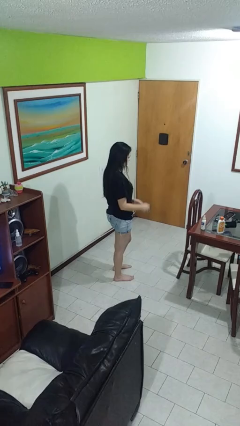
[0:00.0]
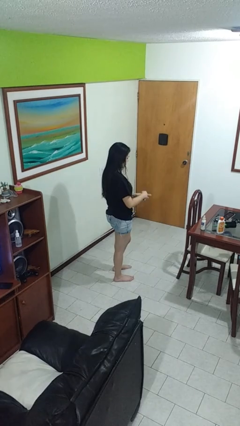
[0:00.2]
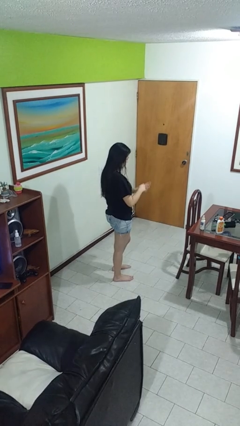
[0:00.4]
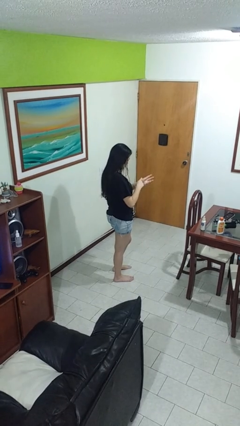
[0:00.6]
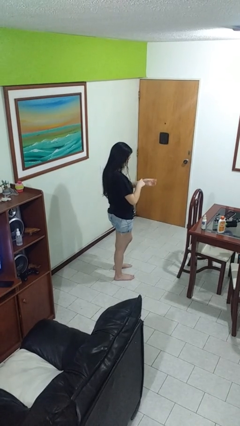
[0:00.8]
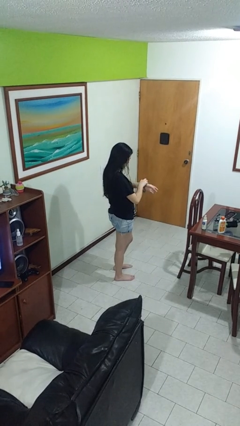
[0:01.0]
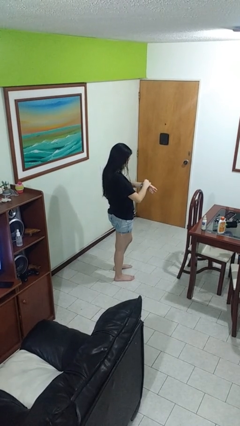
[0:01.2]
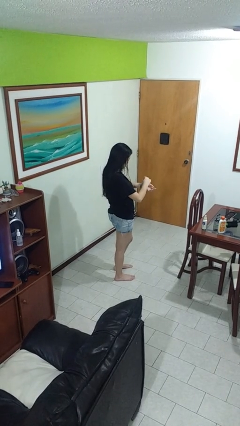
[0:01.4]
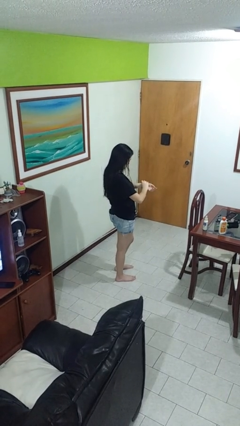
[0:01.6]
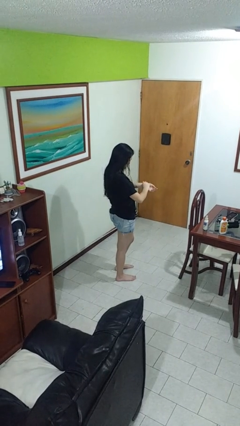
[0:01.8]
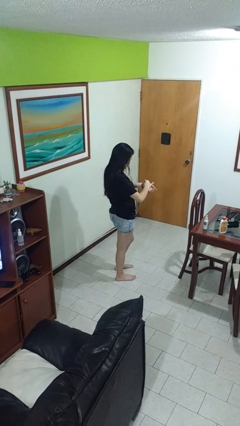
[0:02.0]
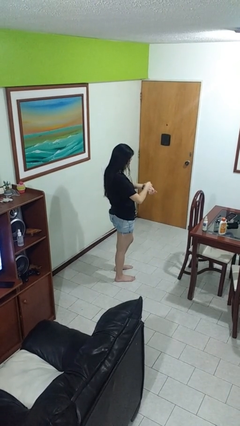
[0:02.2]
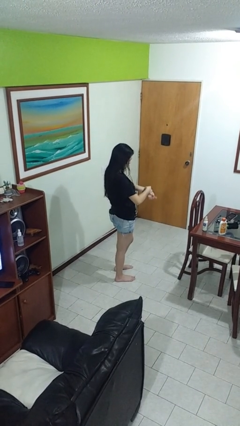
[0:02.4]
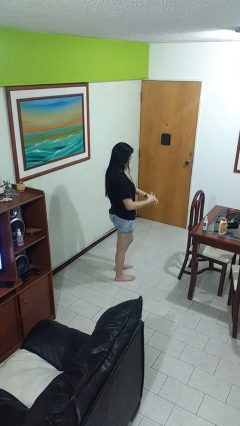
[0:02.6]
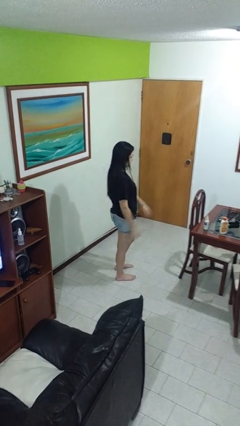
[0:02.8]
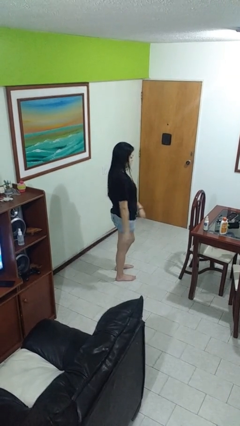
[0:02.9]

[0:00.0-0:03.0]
person puts on wristwatch

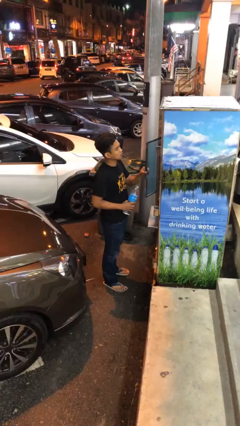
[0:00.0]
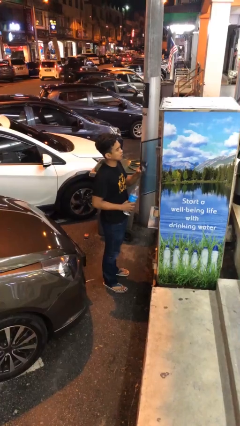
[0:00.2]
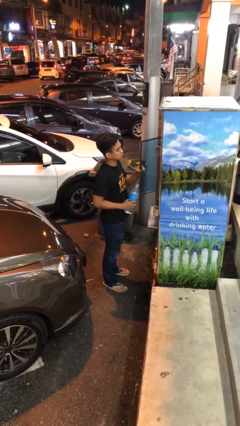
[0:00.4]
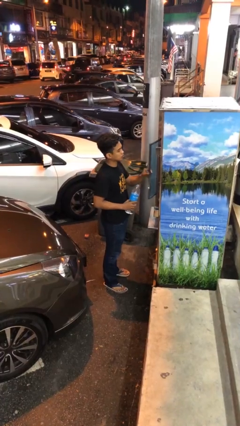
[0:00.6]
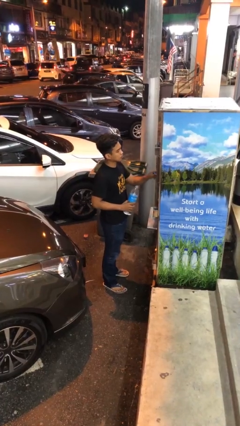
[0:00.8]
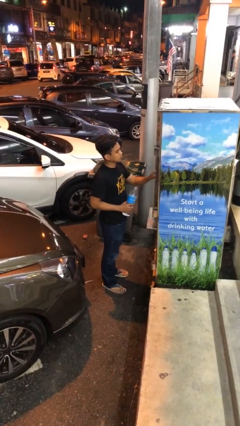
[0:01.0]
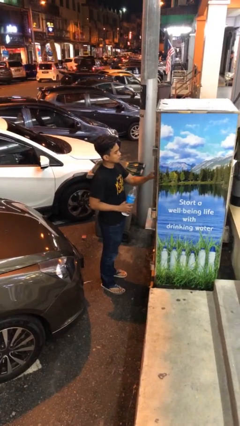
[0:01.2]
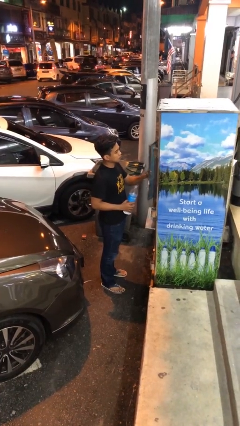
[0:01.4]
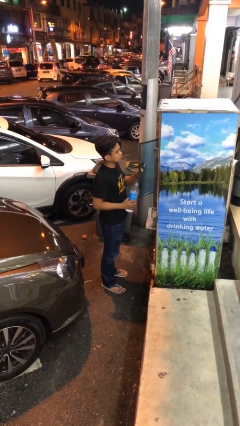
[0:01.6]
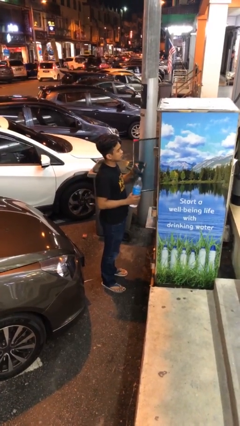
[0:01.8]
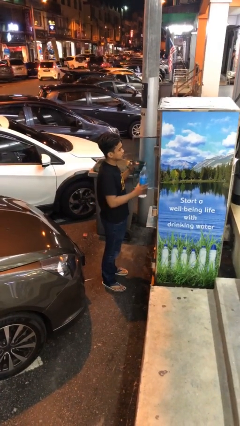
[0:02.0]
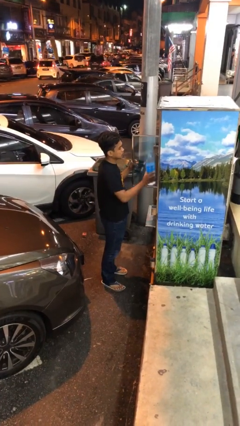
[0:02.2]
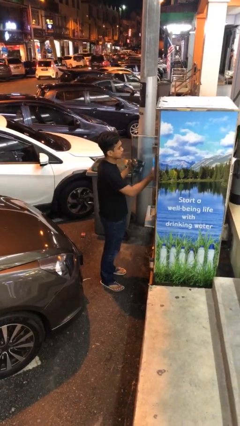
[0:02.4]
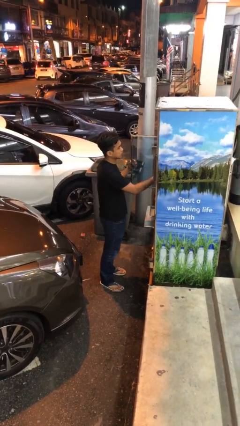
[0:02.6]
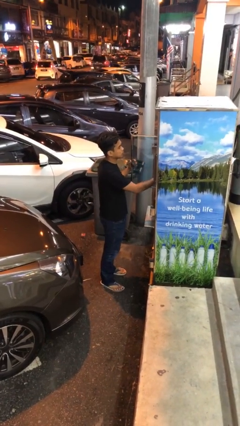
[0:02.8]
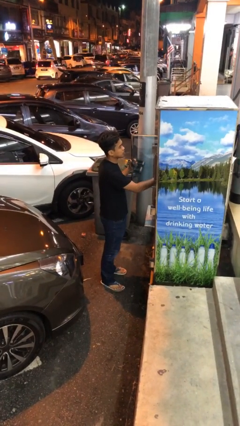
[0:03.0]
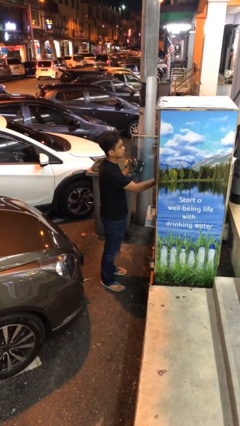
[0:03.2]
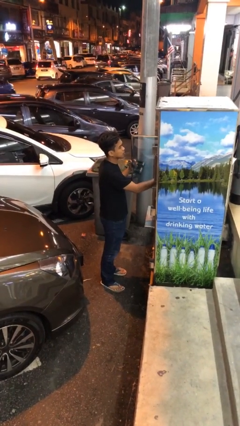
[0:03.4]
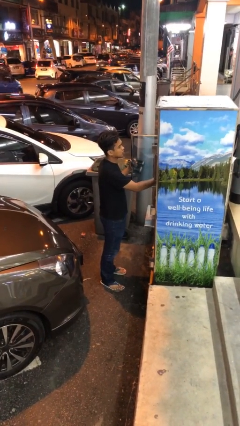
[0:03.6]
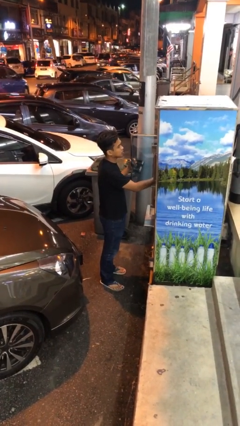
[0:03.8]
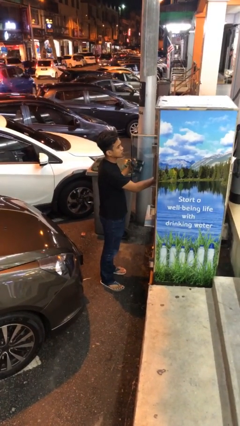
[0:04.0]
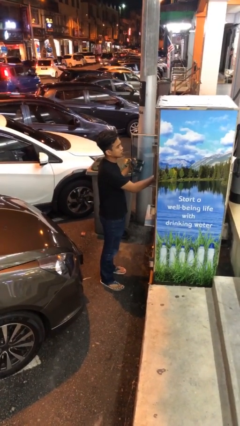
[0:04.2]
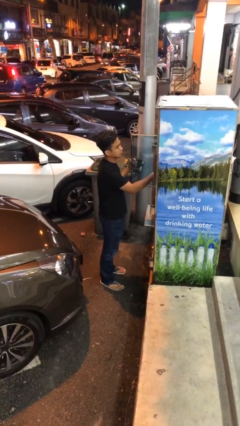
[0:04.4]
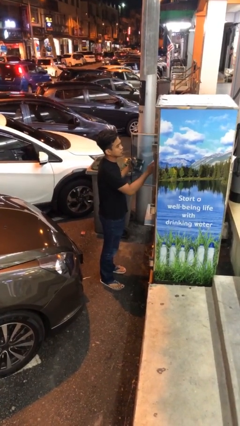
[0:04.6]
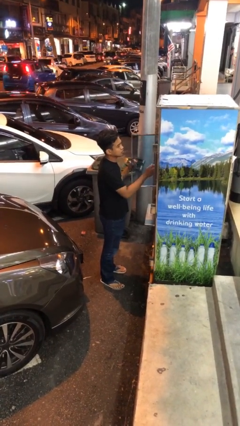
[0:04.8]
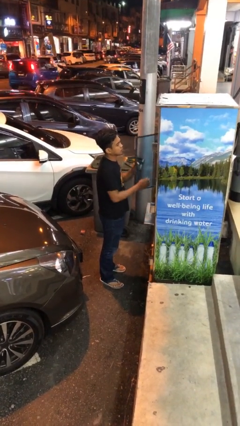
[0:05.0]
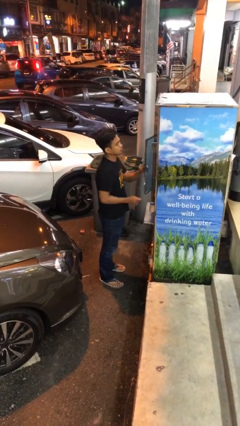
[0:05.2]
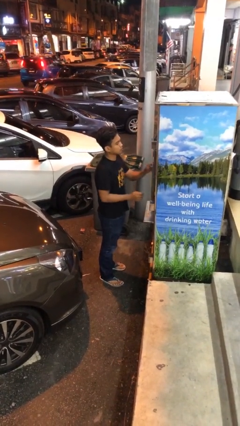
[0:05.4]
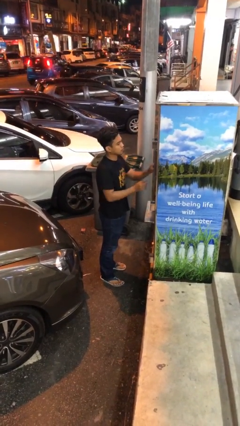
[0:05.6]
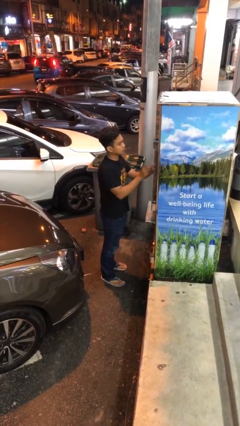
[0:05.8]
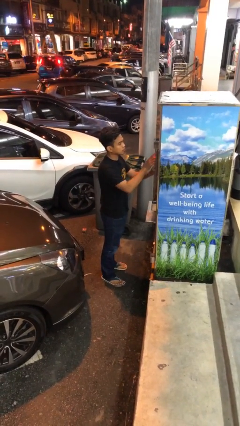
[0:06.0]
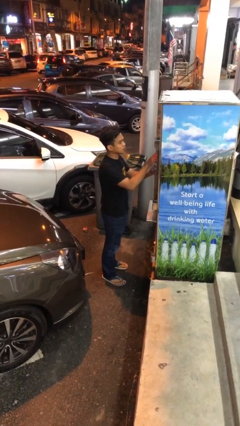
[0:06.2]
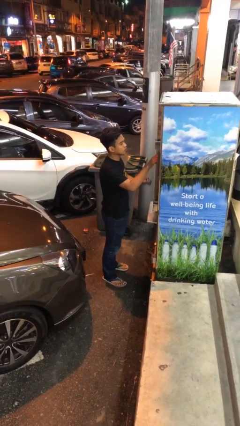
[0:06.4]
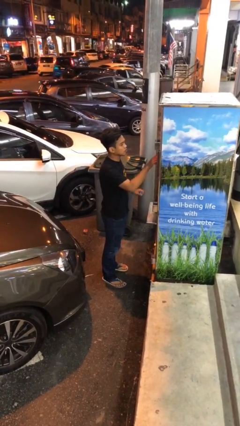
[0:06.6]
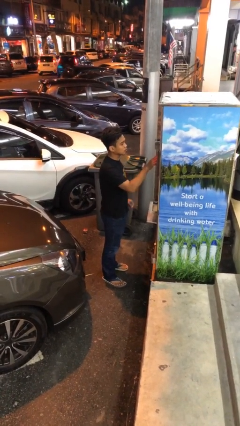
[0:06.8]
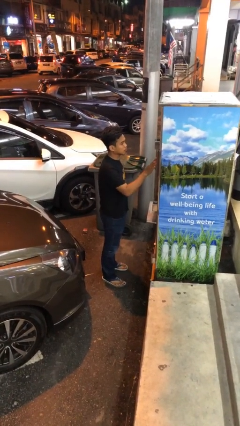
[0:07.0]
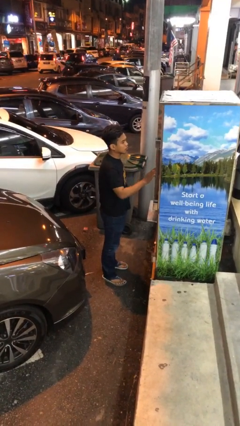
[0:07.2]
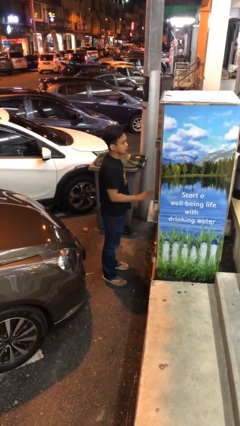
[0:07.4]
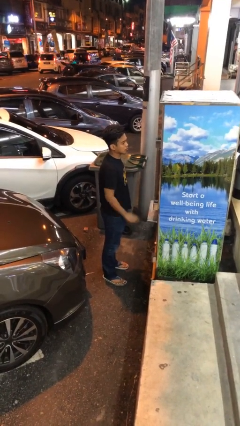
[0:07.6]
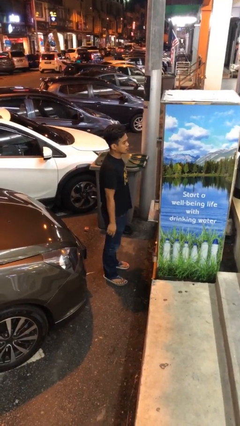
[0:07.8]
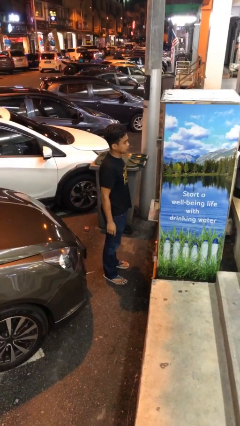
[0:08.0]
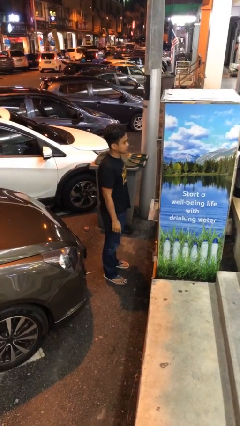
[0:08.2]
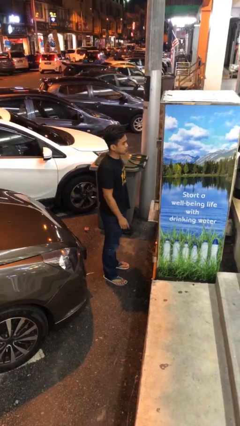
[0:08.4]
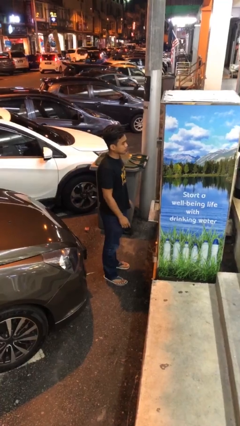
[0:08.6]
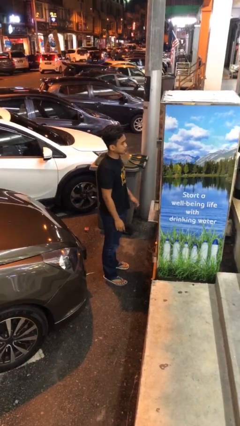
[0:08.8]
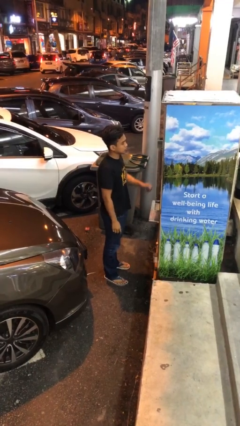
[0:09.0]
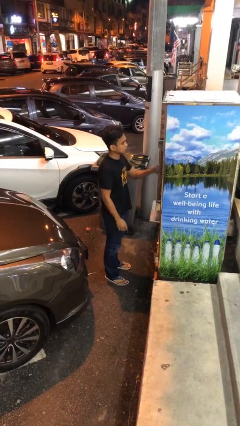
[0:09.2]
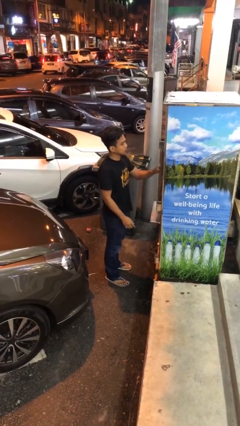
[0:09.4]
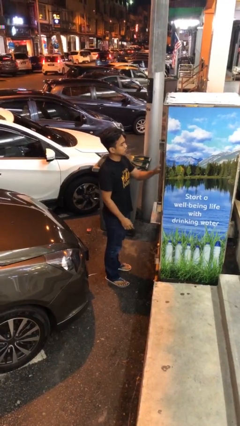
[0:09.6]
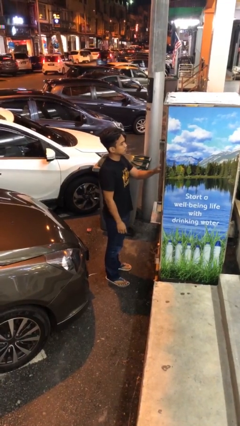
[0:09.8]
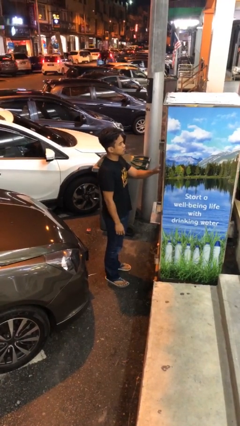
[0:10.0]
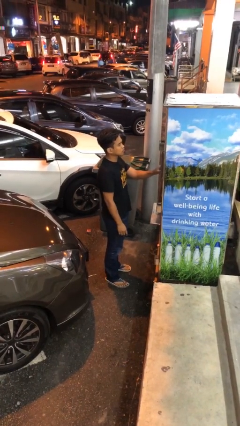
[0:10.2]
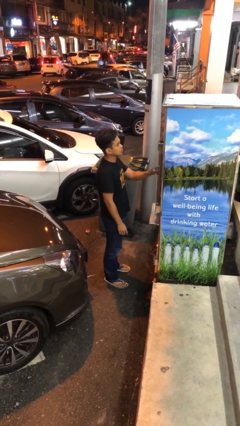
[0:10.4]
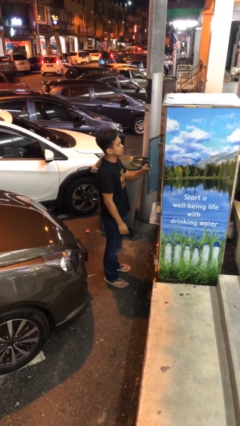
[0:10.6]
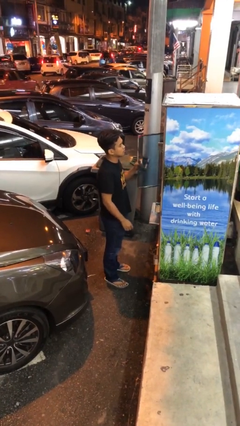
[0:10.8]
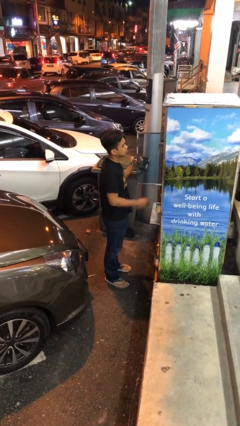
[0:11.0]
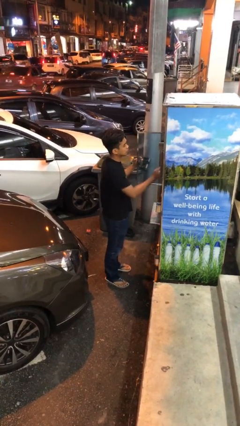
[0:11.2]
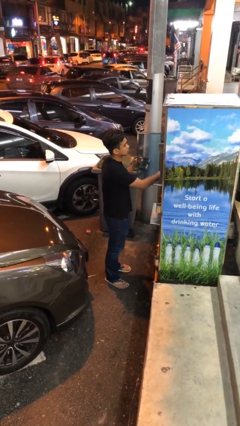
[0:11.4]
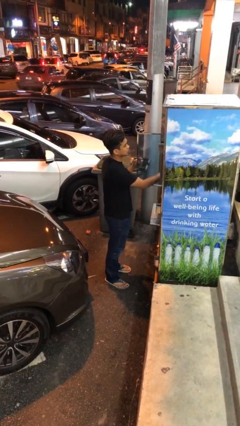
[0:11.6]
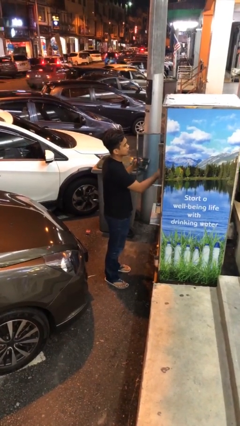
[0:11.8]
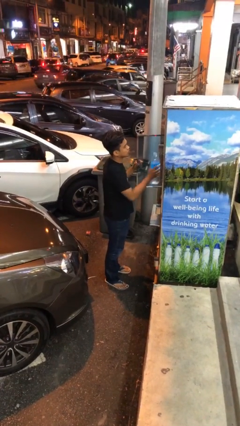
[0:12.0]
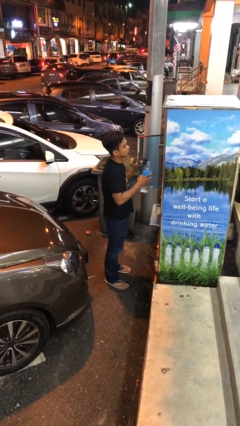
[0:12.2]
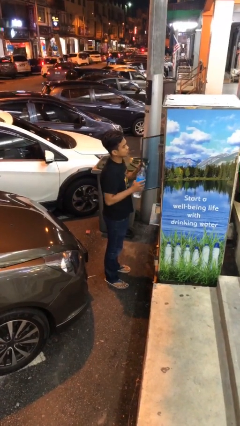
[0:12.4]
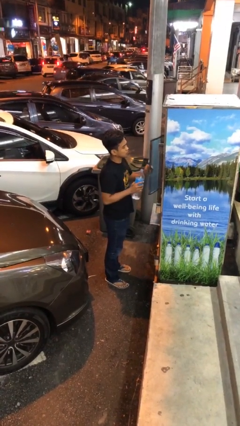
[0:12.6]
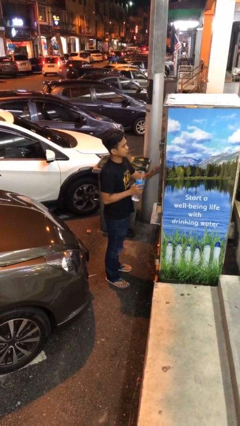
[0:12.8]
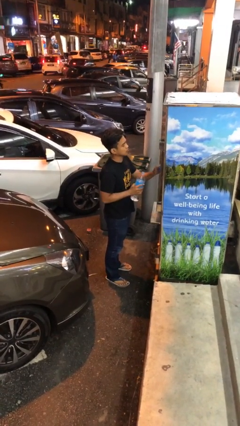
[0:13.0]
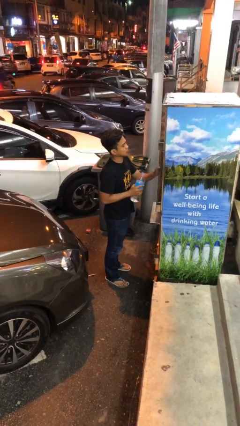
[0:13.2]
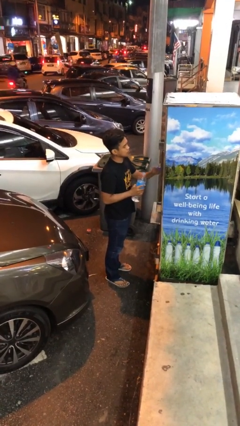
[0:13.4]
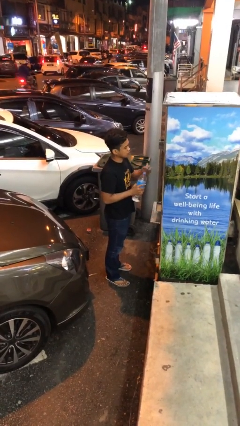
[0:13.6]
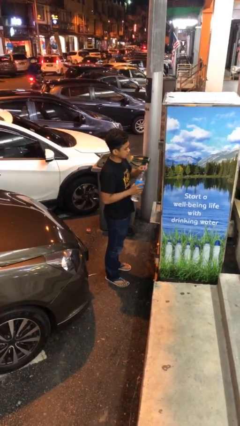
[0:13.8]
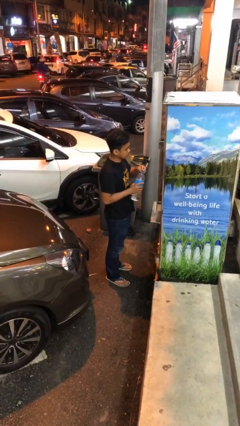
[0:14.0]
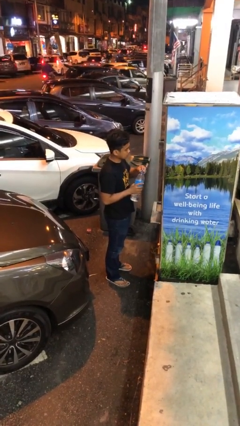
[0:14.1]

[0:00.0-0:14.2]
person purchases from machine

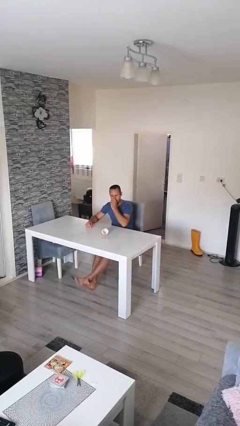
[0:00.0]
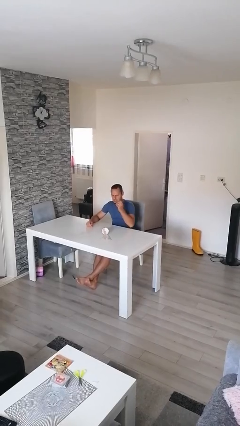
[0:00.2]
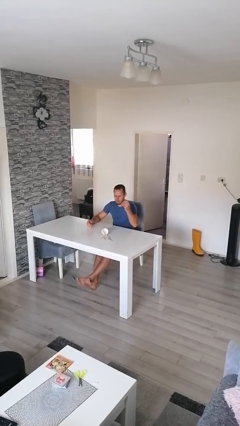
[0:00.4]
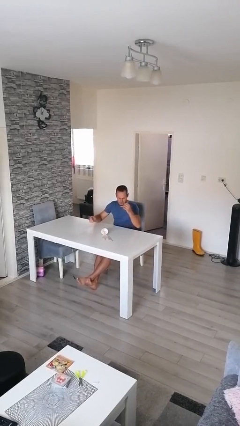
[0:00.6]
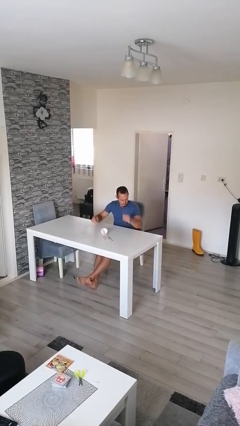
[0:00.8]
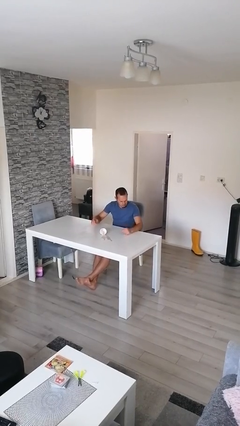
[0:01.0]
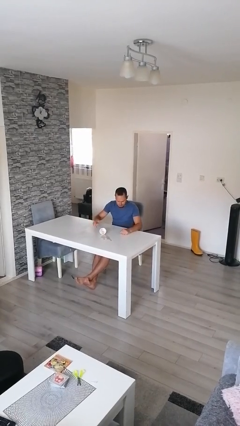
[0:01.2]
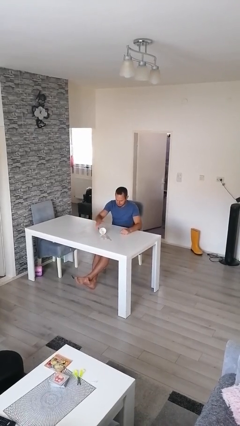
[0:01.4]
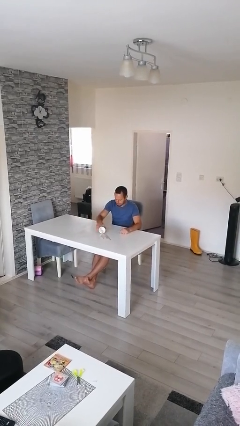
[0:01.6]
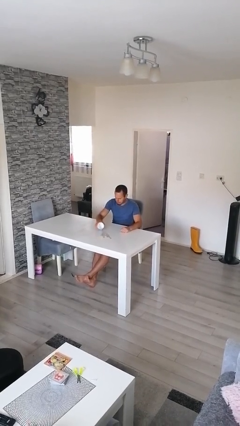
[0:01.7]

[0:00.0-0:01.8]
person spills on table
